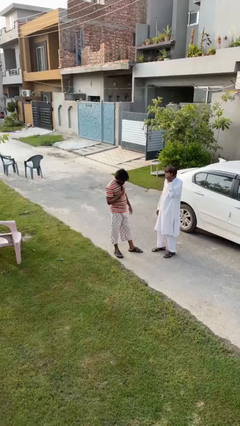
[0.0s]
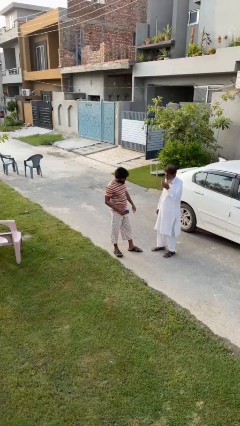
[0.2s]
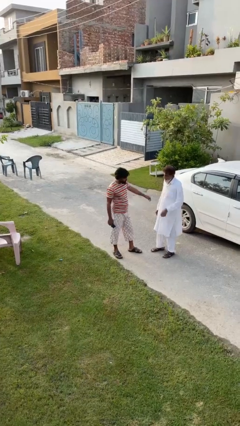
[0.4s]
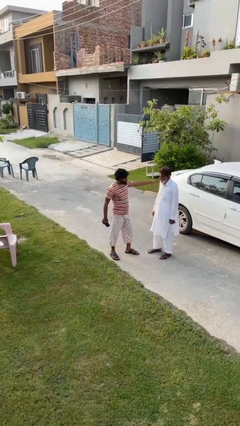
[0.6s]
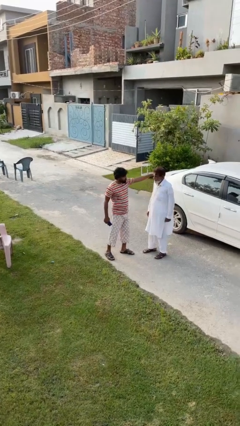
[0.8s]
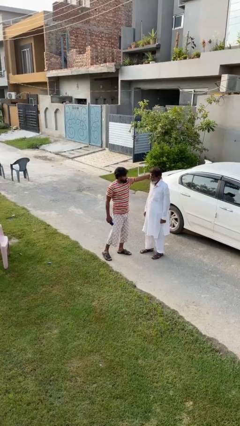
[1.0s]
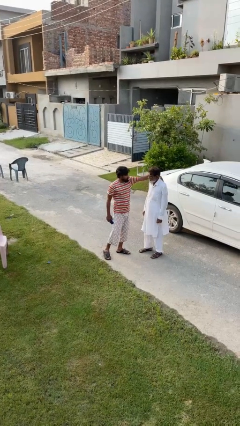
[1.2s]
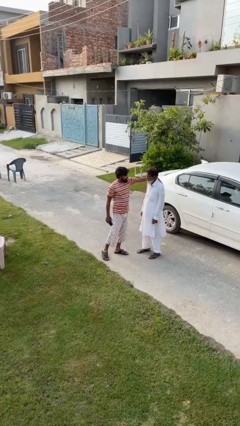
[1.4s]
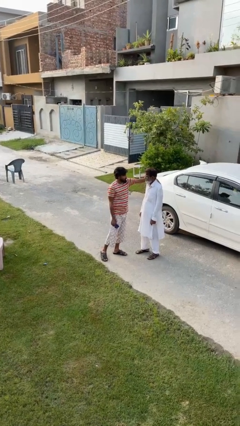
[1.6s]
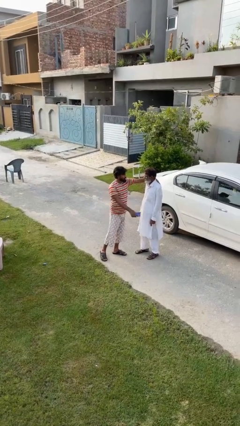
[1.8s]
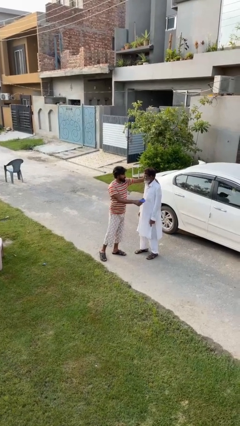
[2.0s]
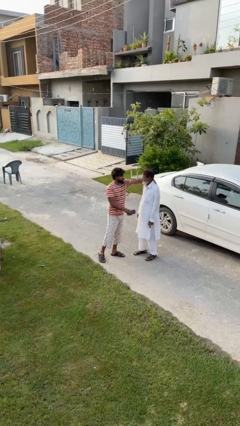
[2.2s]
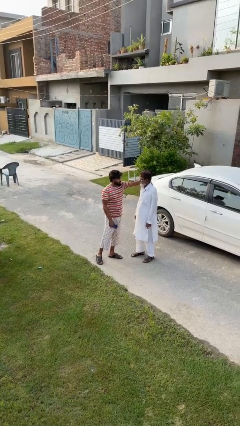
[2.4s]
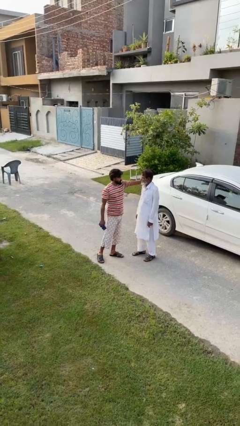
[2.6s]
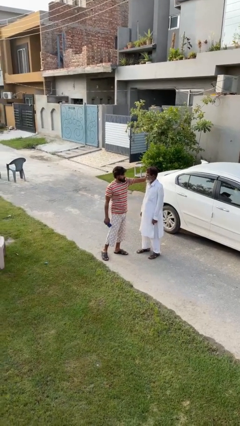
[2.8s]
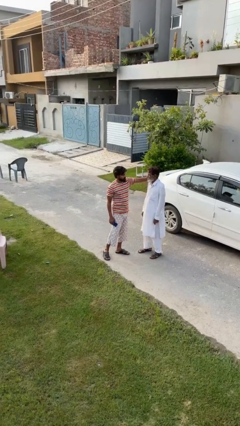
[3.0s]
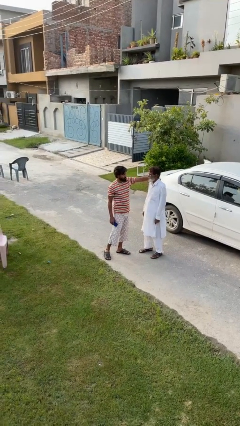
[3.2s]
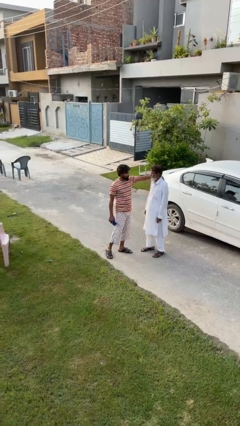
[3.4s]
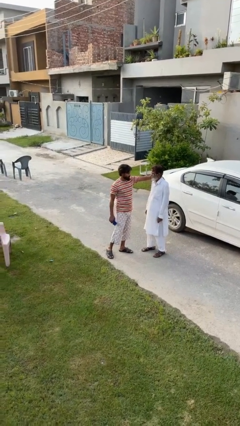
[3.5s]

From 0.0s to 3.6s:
person pounds shoulders of person

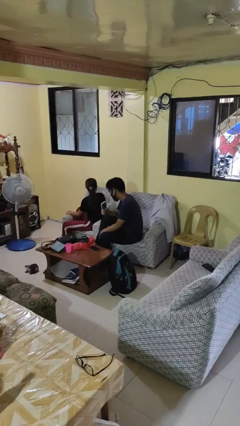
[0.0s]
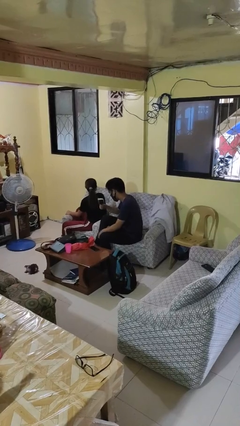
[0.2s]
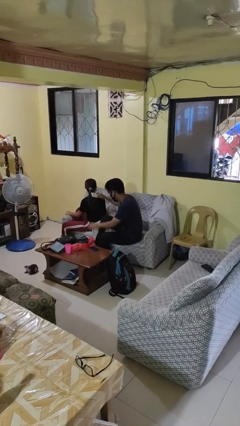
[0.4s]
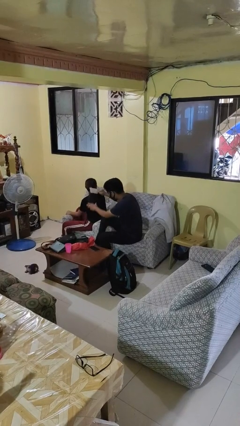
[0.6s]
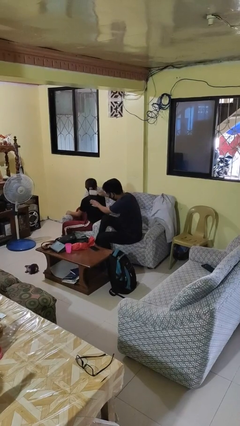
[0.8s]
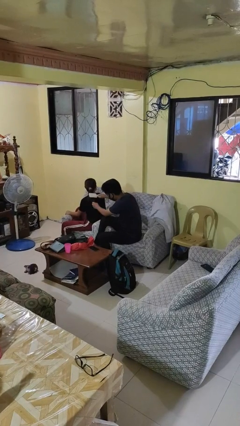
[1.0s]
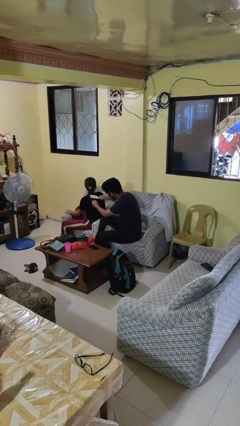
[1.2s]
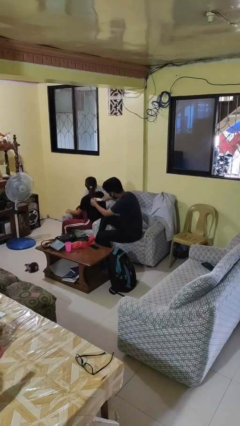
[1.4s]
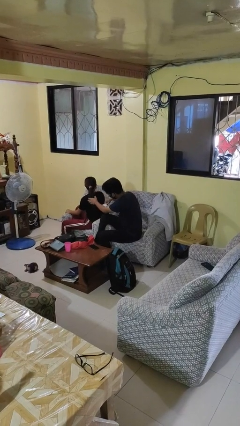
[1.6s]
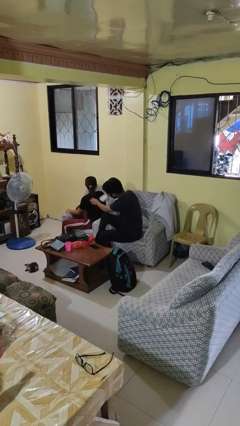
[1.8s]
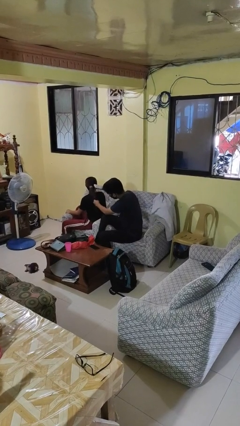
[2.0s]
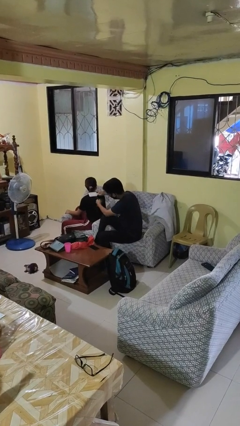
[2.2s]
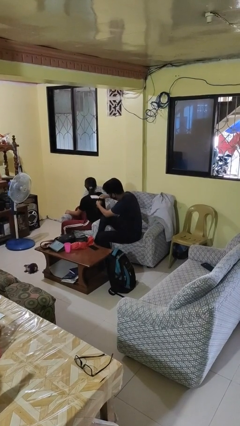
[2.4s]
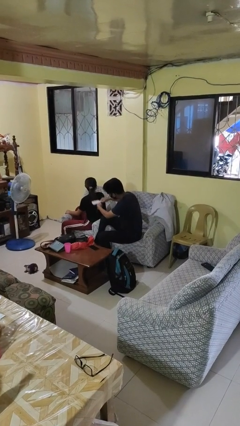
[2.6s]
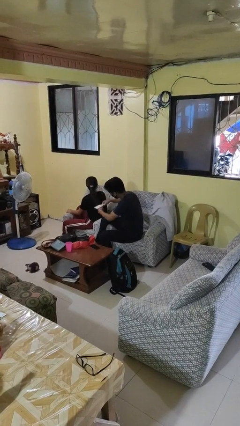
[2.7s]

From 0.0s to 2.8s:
person brushes hair of person

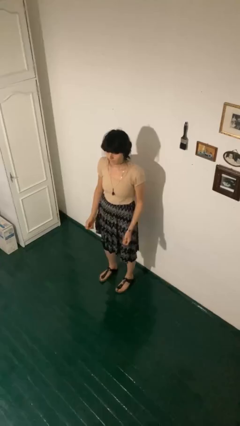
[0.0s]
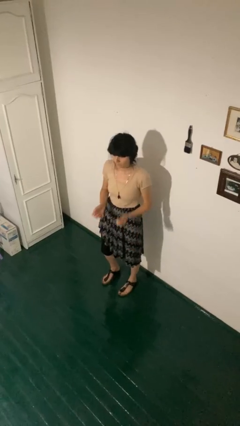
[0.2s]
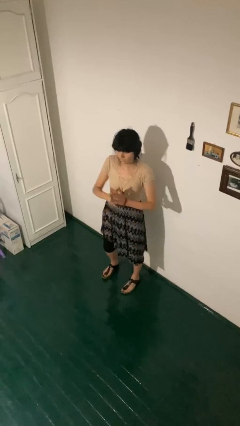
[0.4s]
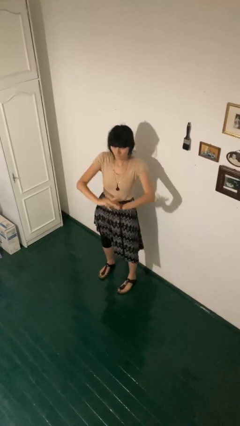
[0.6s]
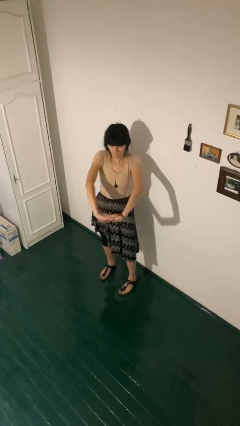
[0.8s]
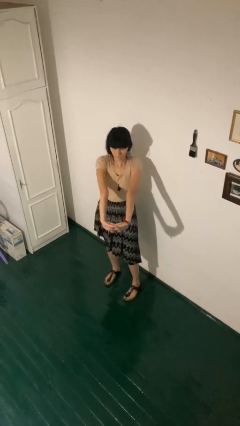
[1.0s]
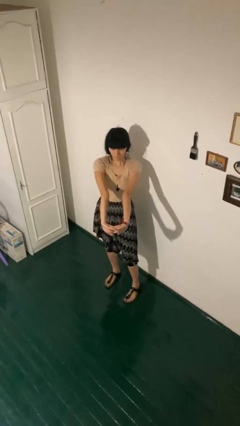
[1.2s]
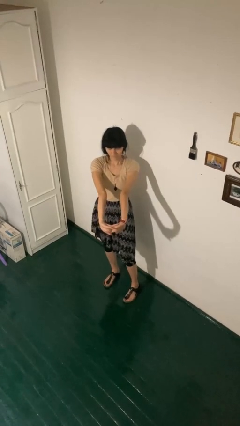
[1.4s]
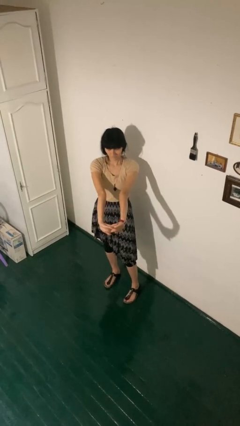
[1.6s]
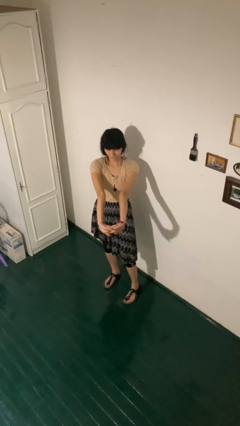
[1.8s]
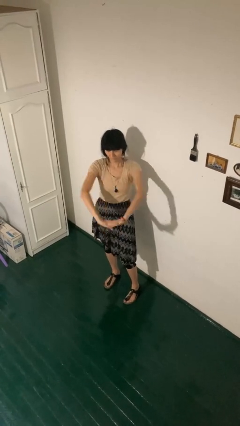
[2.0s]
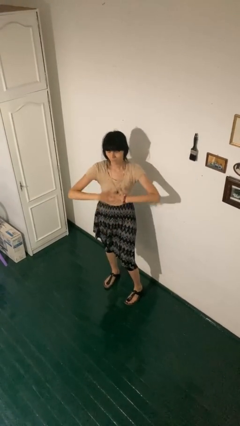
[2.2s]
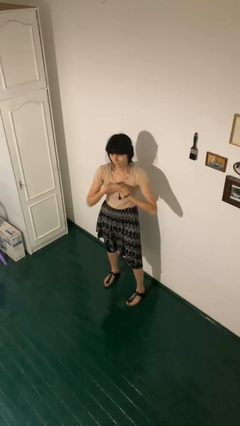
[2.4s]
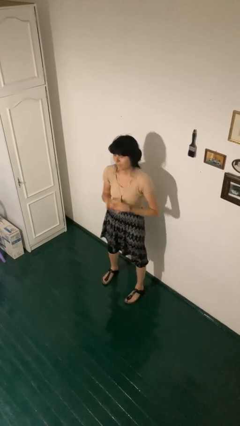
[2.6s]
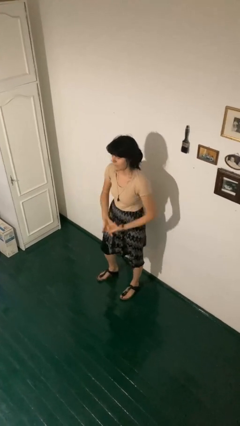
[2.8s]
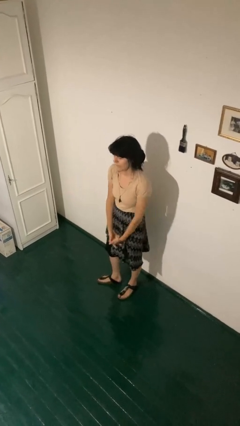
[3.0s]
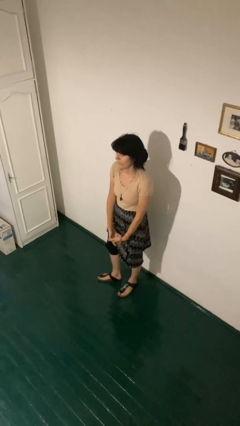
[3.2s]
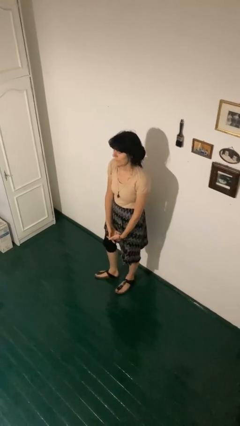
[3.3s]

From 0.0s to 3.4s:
person cracks knuckles

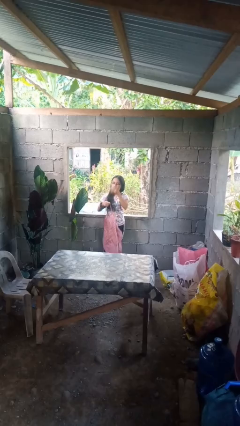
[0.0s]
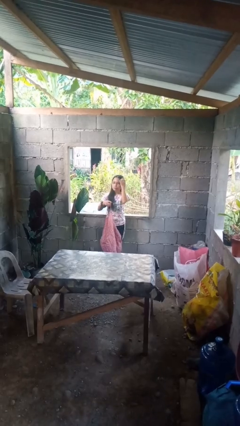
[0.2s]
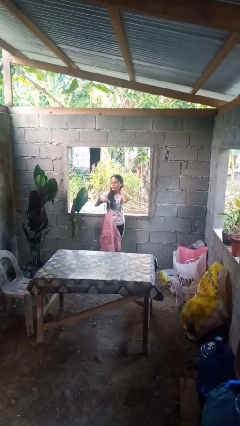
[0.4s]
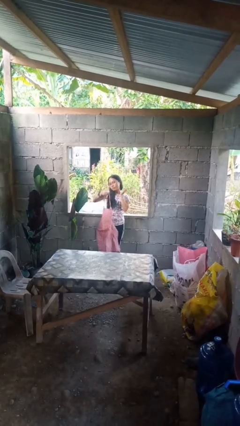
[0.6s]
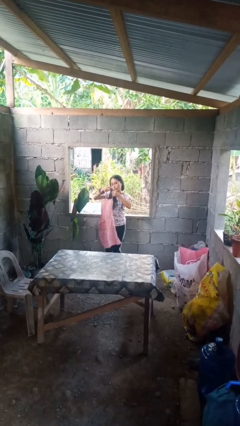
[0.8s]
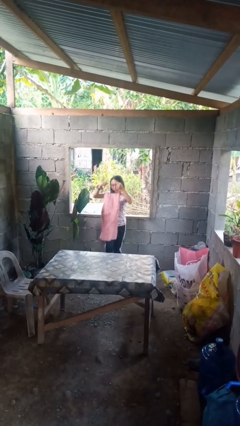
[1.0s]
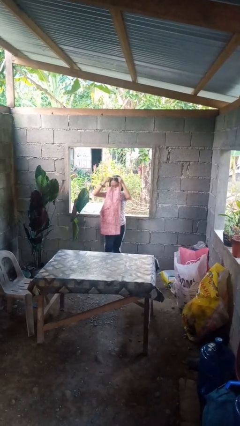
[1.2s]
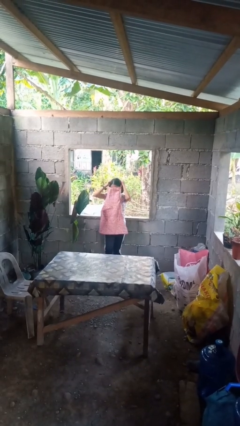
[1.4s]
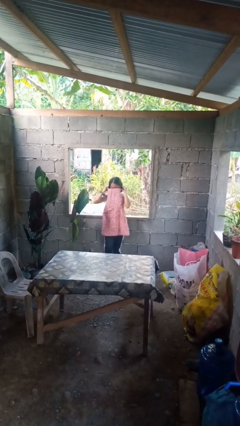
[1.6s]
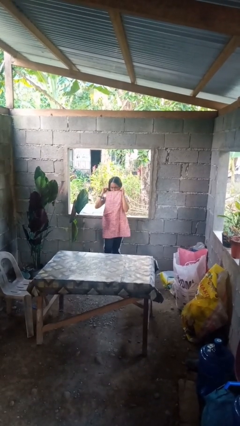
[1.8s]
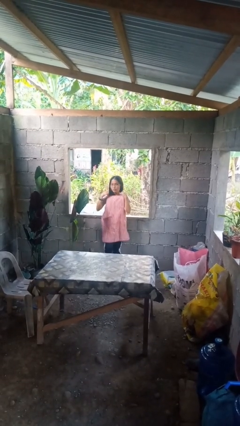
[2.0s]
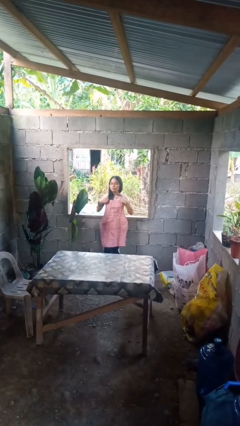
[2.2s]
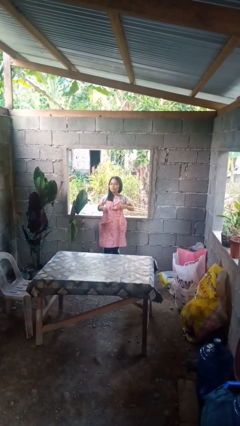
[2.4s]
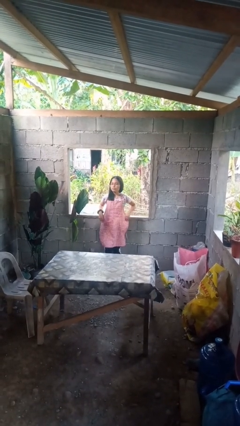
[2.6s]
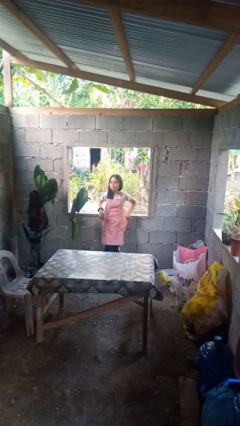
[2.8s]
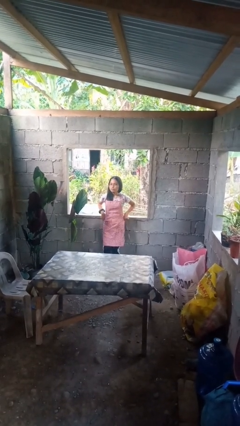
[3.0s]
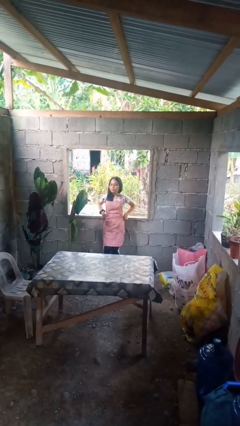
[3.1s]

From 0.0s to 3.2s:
person puts on apron

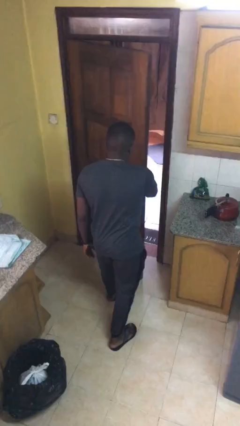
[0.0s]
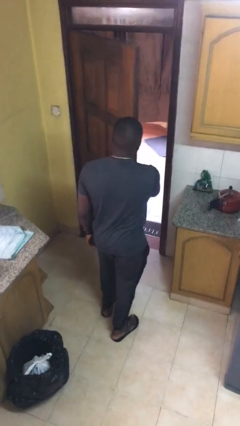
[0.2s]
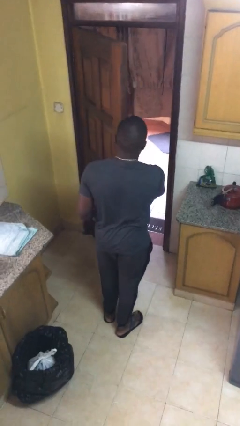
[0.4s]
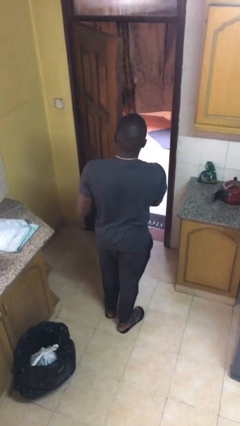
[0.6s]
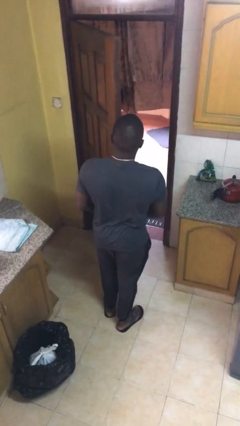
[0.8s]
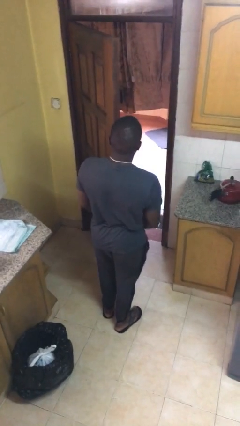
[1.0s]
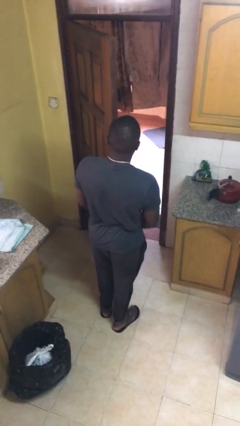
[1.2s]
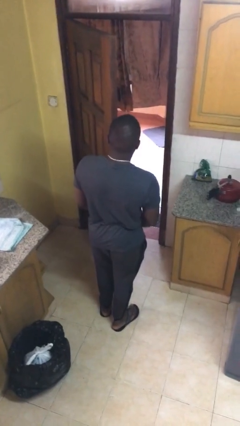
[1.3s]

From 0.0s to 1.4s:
person opens facility door

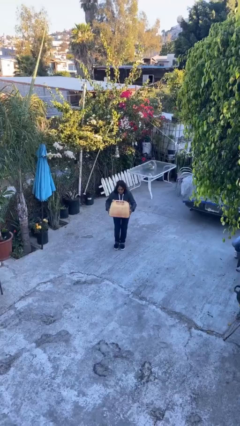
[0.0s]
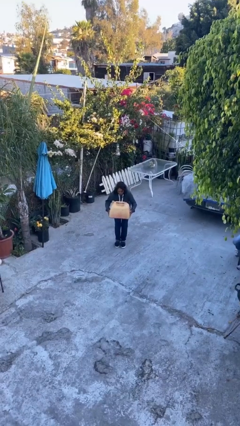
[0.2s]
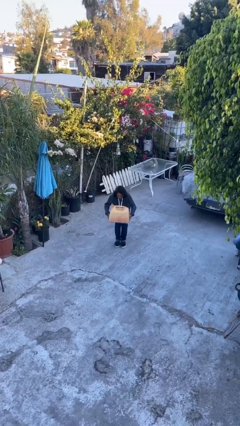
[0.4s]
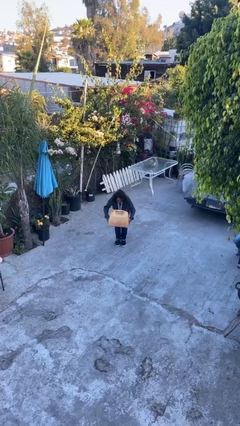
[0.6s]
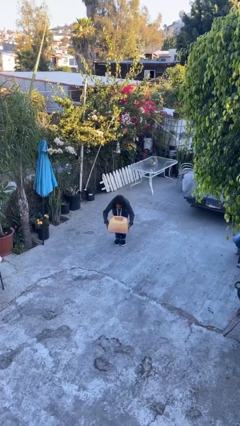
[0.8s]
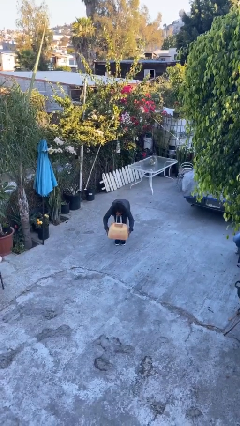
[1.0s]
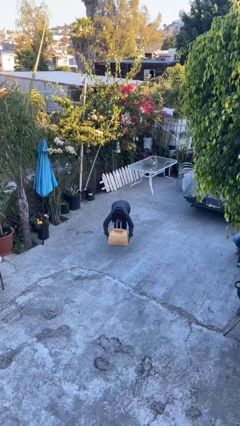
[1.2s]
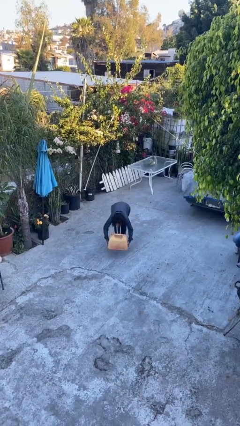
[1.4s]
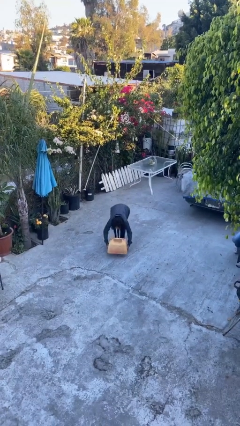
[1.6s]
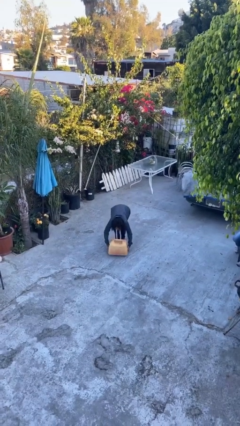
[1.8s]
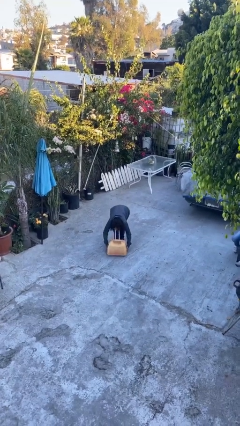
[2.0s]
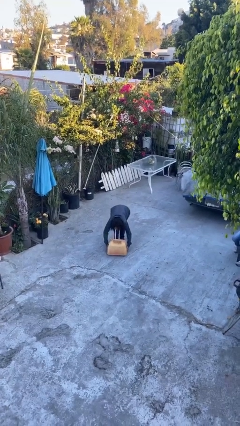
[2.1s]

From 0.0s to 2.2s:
person puts down object on floor

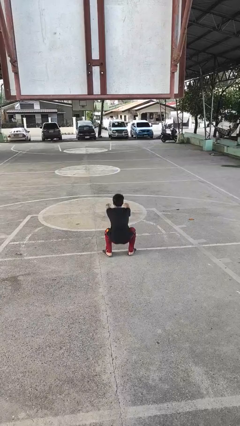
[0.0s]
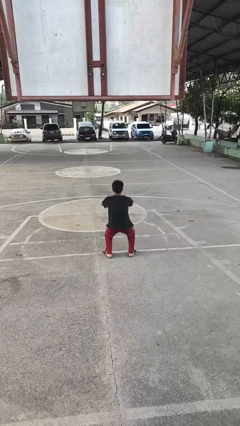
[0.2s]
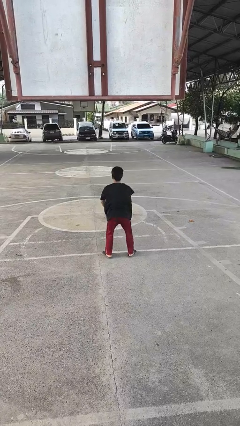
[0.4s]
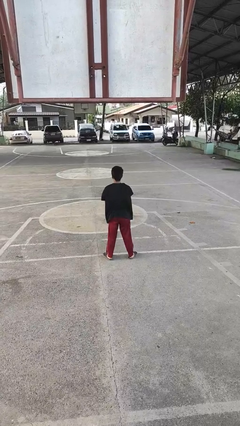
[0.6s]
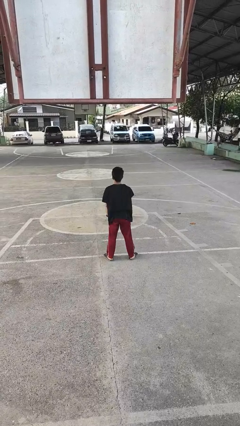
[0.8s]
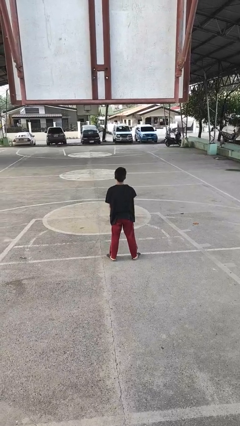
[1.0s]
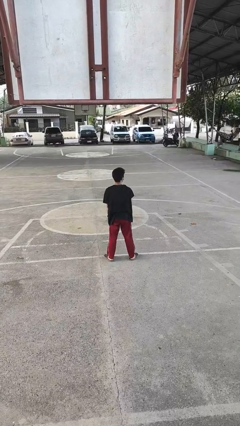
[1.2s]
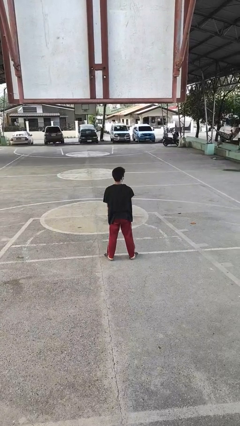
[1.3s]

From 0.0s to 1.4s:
person stands up
